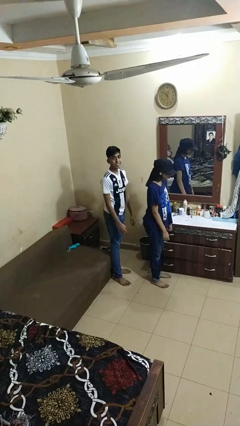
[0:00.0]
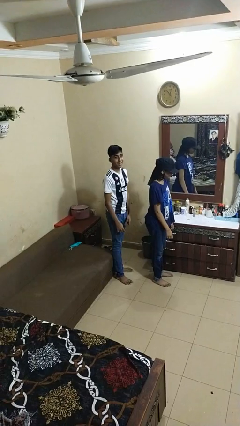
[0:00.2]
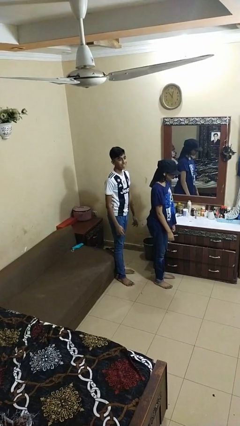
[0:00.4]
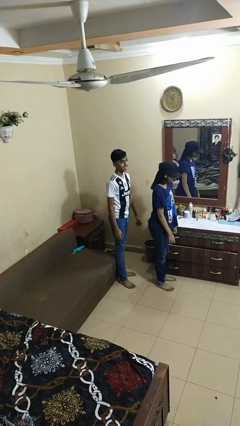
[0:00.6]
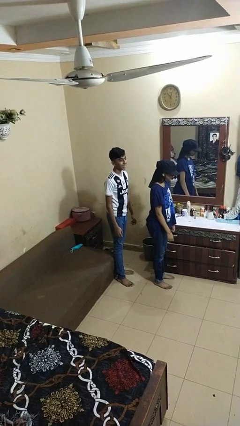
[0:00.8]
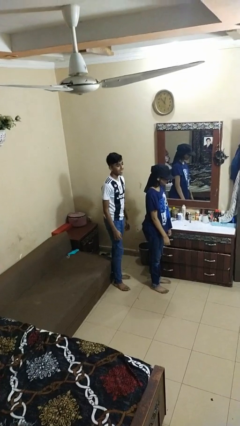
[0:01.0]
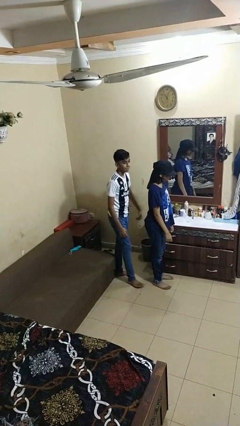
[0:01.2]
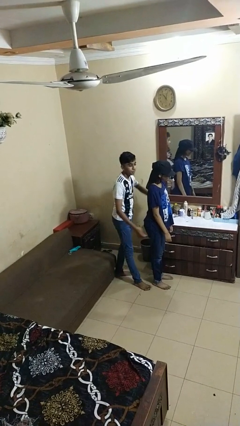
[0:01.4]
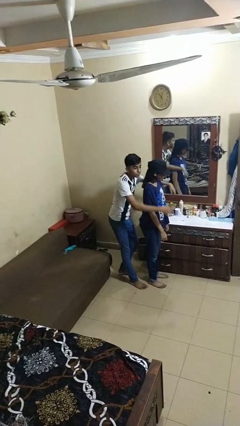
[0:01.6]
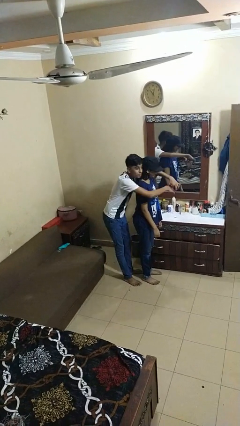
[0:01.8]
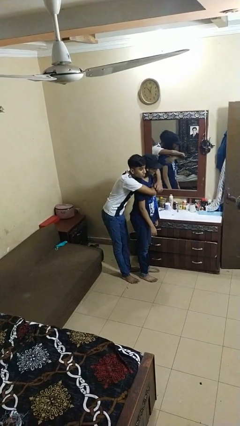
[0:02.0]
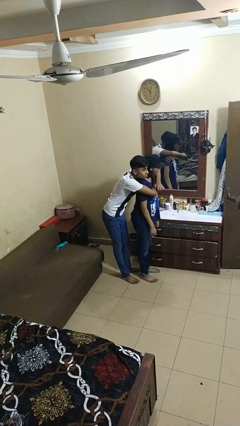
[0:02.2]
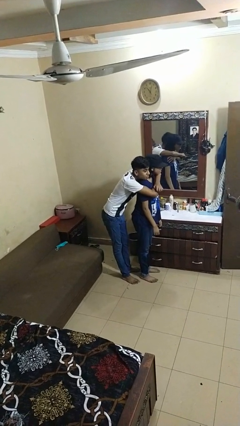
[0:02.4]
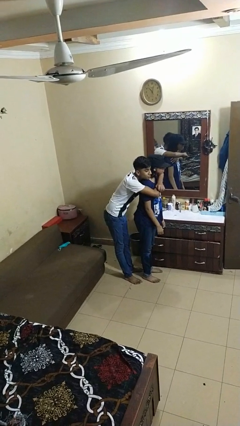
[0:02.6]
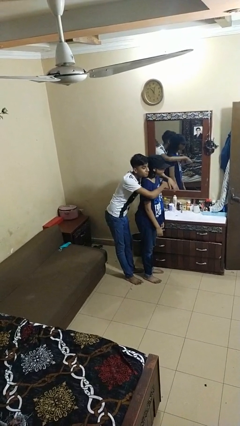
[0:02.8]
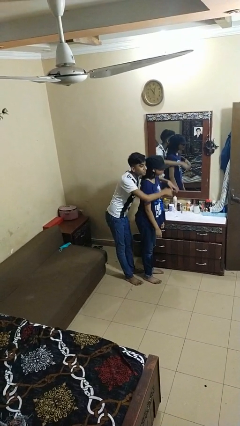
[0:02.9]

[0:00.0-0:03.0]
person hugs person from behind

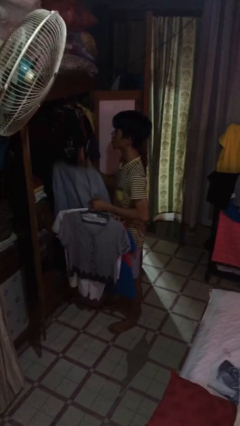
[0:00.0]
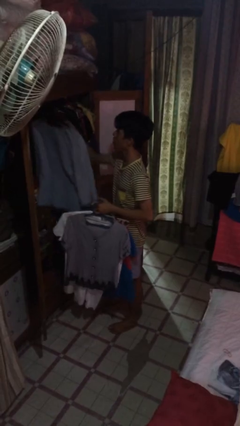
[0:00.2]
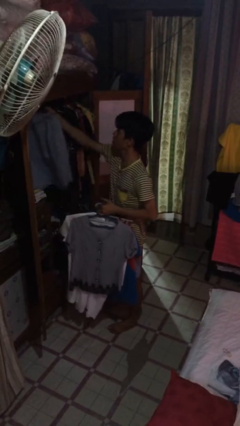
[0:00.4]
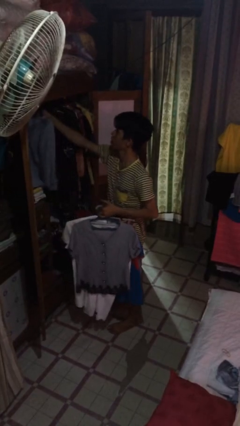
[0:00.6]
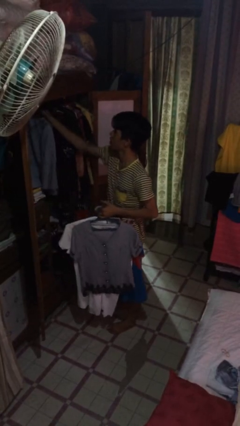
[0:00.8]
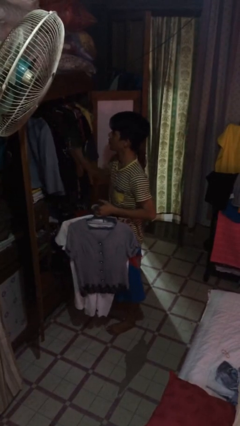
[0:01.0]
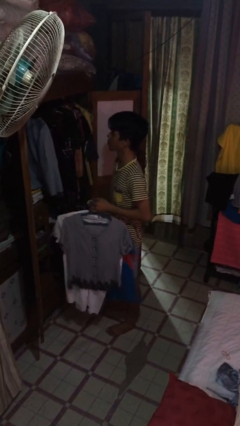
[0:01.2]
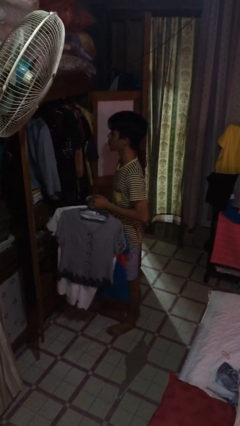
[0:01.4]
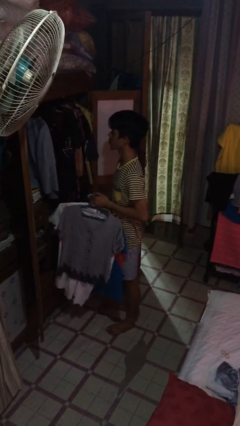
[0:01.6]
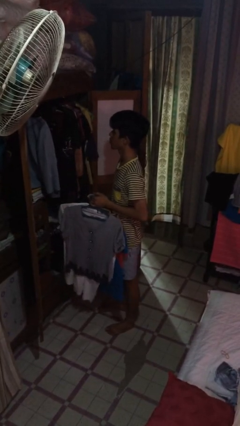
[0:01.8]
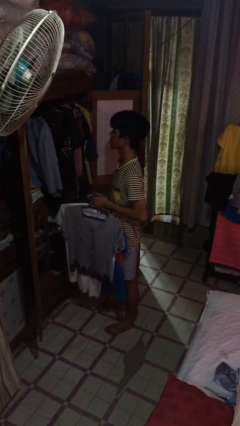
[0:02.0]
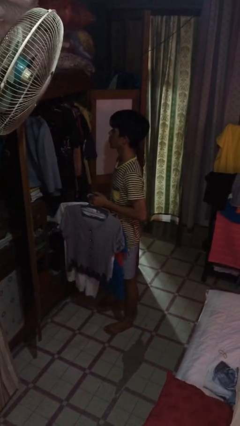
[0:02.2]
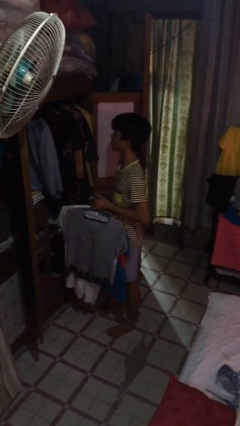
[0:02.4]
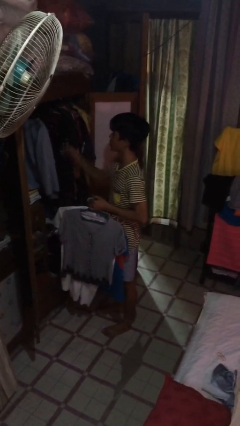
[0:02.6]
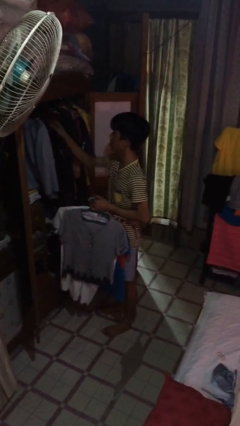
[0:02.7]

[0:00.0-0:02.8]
person puts clothes into closet

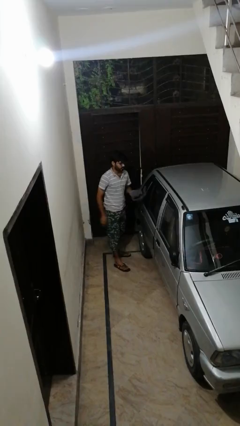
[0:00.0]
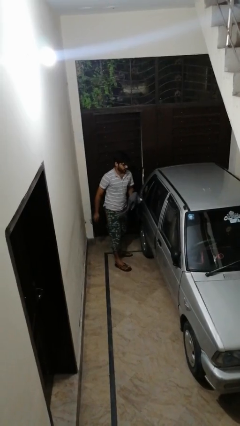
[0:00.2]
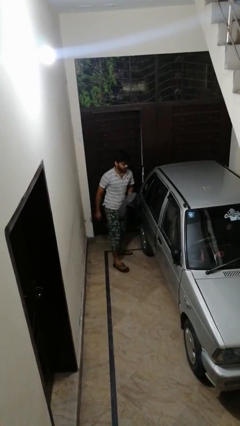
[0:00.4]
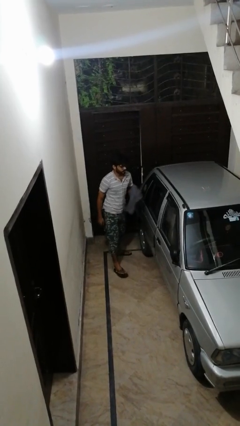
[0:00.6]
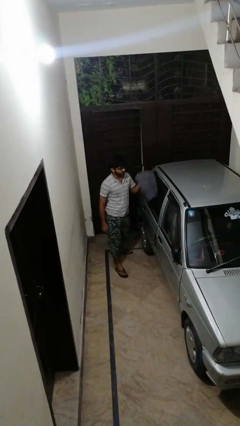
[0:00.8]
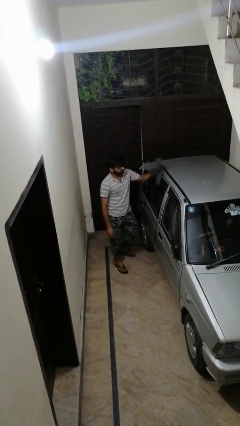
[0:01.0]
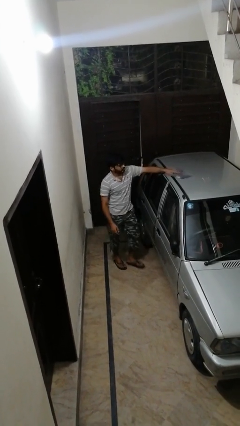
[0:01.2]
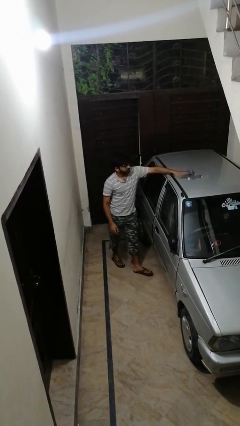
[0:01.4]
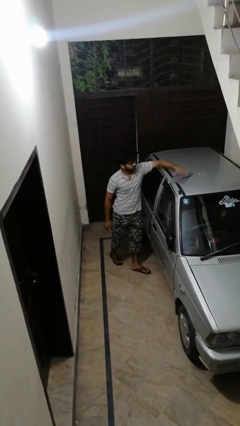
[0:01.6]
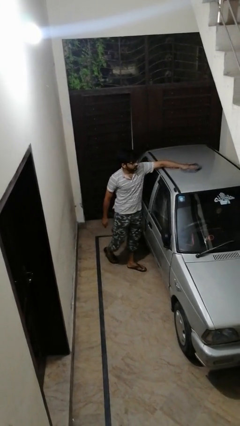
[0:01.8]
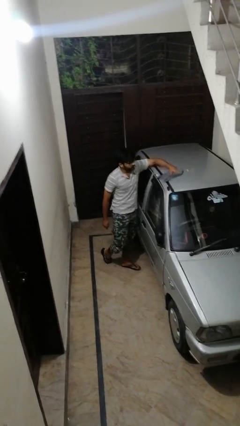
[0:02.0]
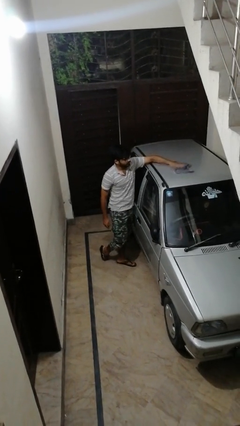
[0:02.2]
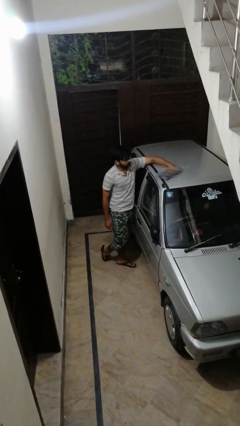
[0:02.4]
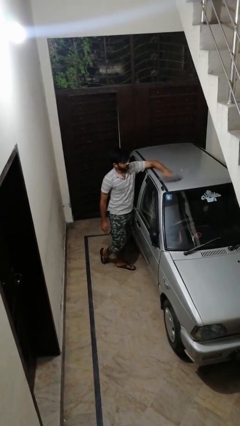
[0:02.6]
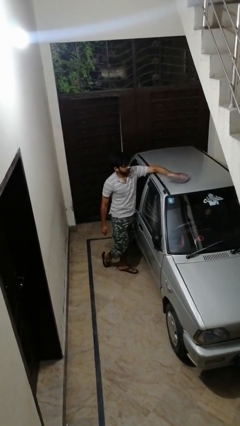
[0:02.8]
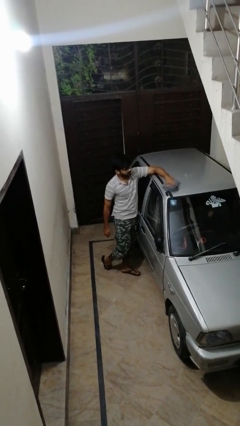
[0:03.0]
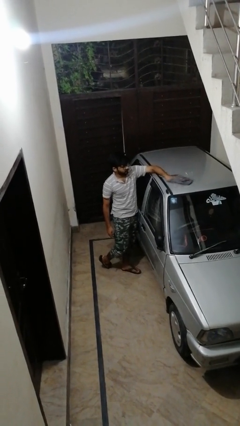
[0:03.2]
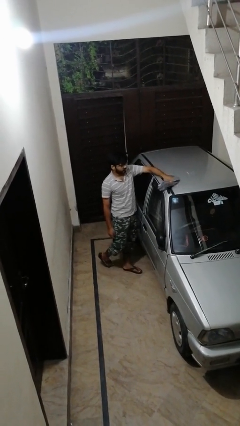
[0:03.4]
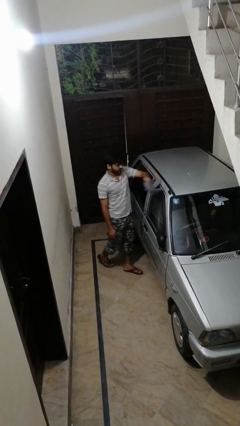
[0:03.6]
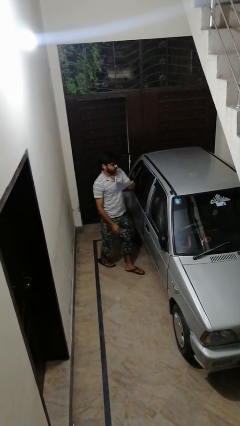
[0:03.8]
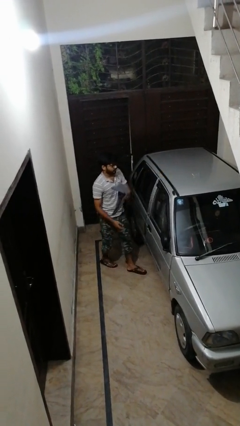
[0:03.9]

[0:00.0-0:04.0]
person polishes car with rag

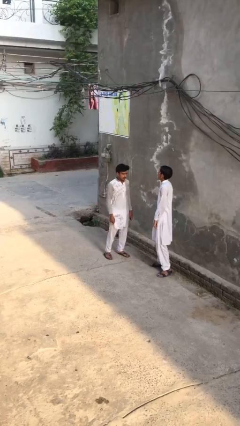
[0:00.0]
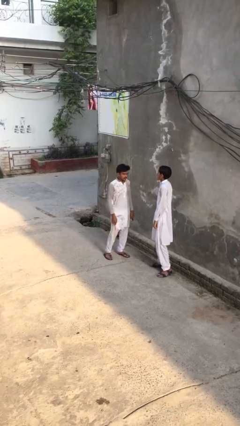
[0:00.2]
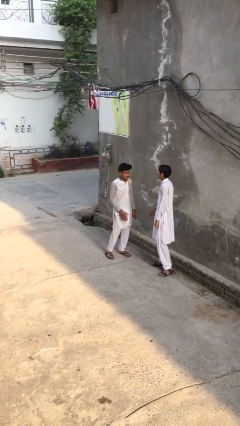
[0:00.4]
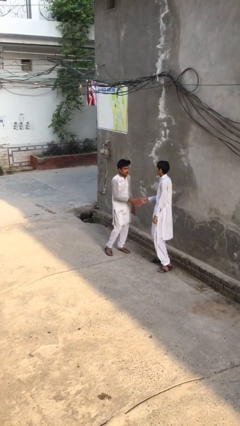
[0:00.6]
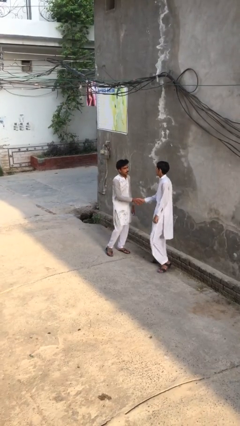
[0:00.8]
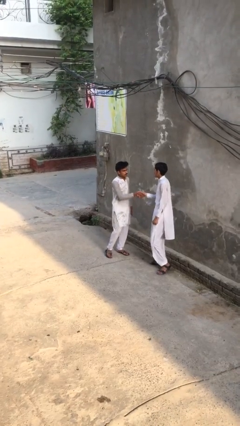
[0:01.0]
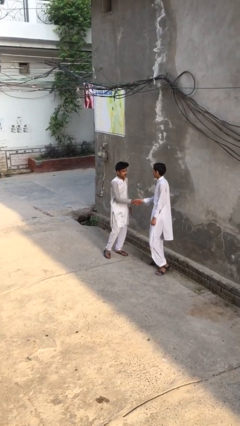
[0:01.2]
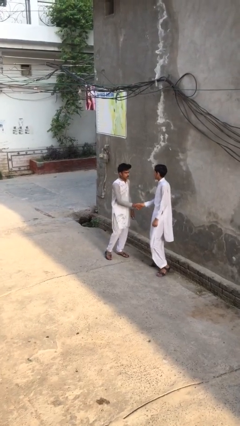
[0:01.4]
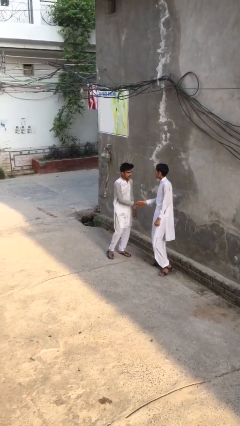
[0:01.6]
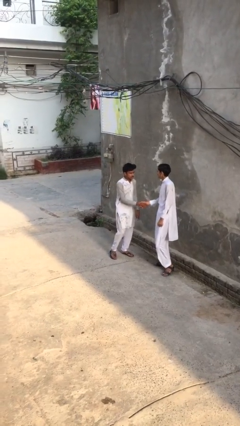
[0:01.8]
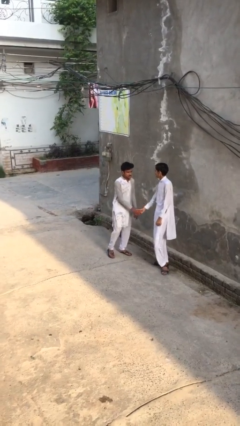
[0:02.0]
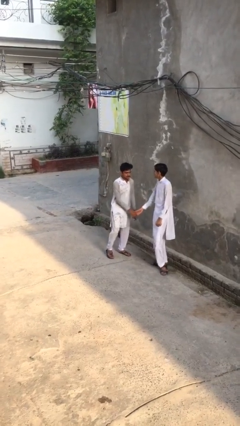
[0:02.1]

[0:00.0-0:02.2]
person shakes hand

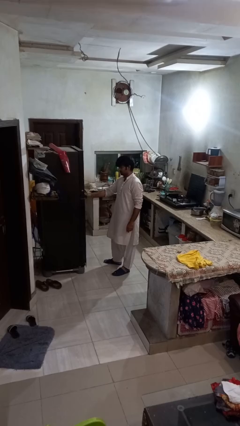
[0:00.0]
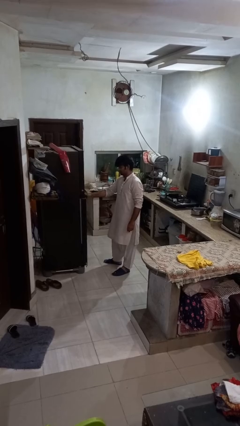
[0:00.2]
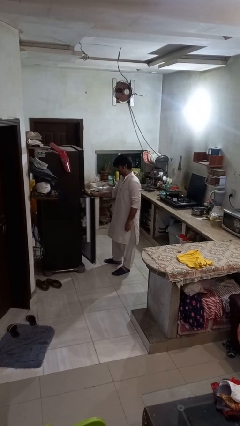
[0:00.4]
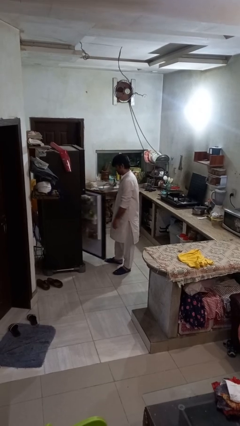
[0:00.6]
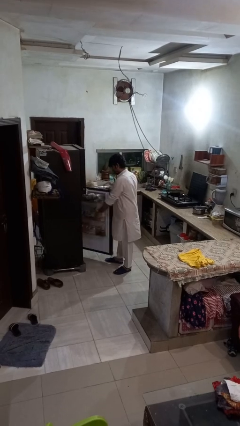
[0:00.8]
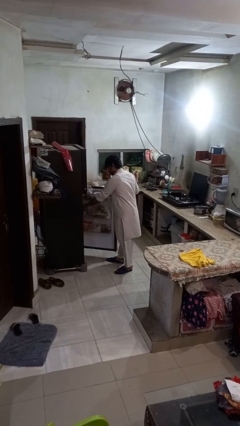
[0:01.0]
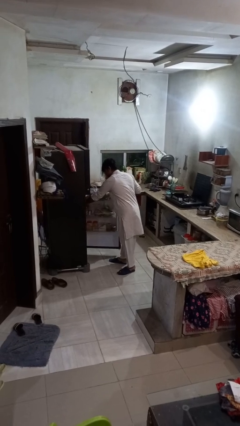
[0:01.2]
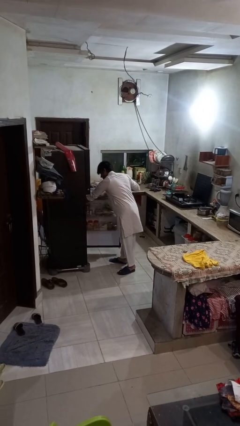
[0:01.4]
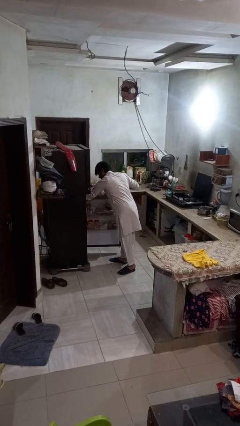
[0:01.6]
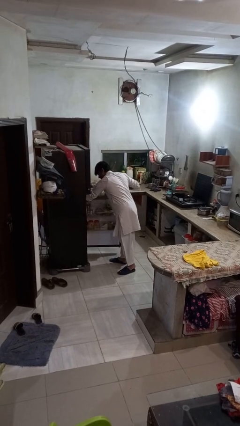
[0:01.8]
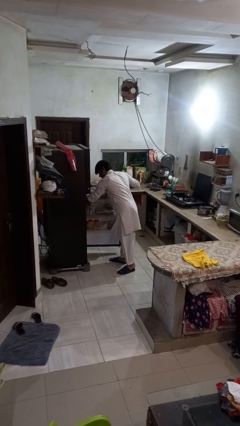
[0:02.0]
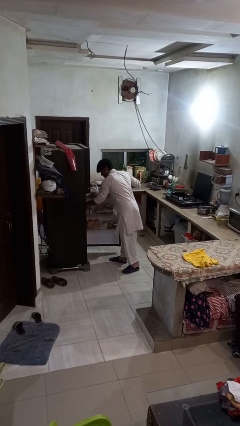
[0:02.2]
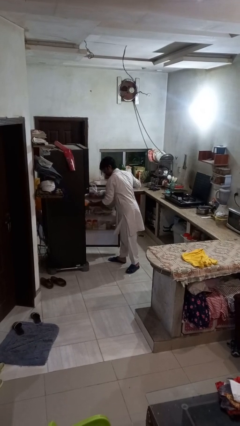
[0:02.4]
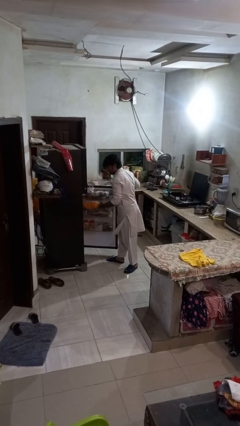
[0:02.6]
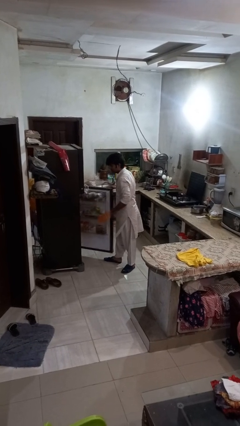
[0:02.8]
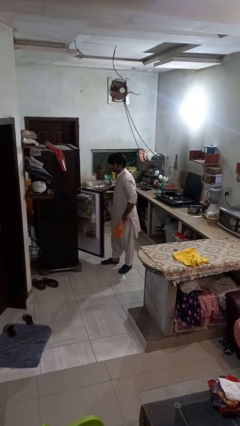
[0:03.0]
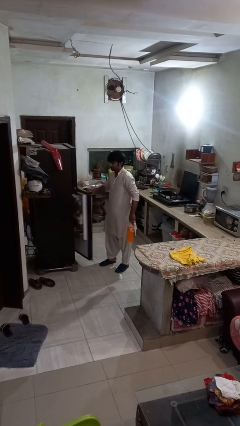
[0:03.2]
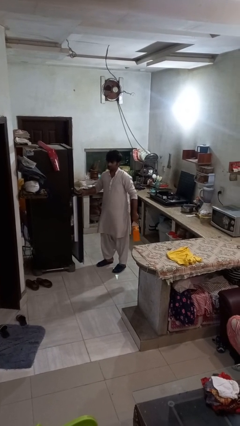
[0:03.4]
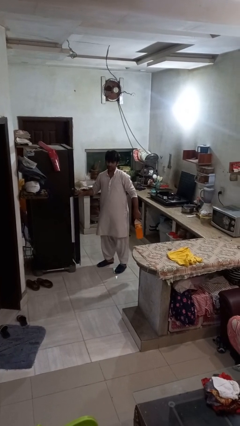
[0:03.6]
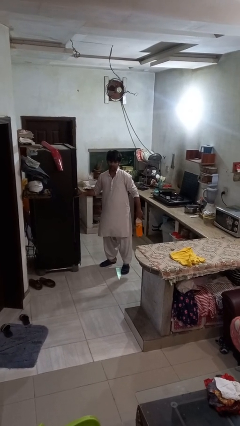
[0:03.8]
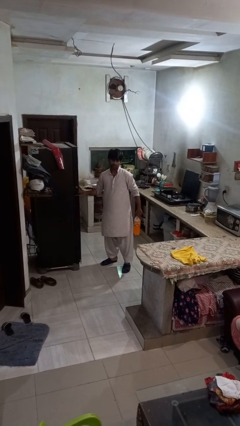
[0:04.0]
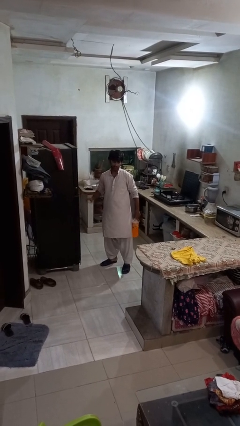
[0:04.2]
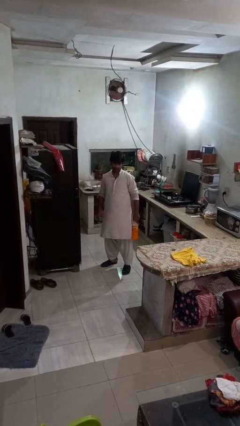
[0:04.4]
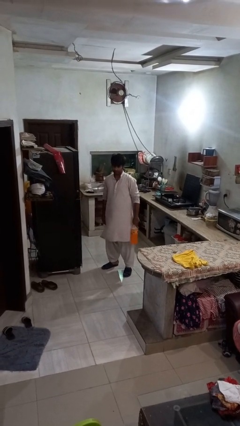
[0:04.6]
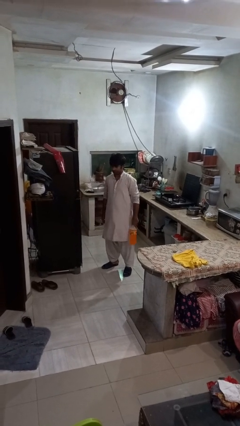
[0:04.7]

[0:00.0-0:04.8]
person takes object from refrigerator

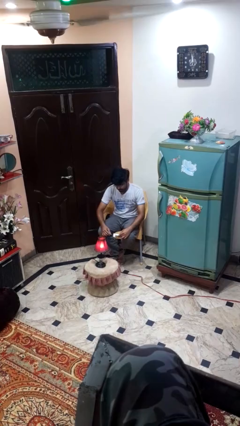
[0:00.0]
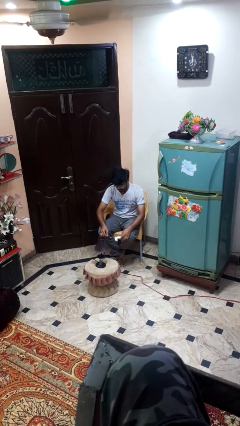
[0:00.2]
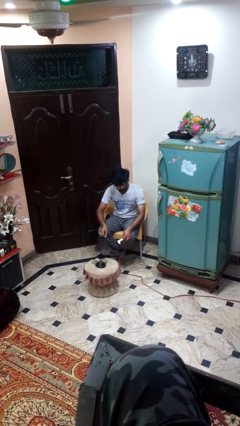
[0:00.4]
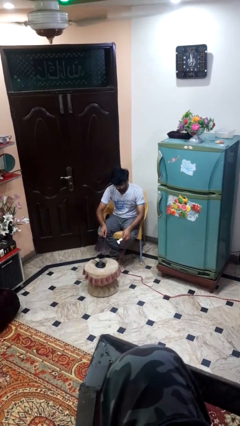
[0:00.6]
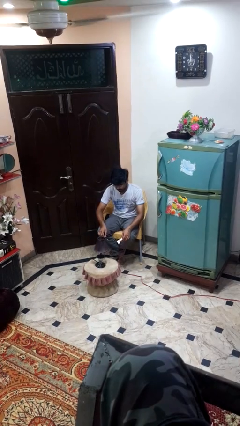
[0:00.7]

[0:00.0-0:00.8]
person turns off lamp
